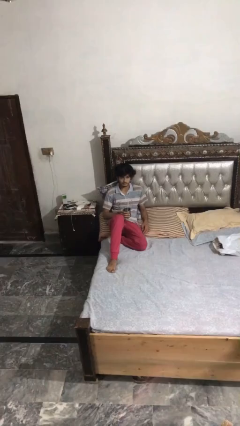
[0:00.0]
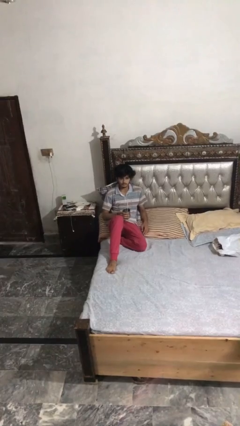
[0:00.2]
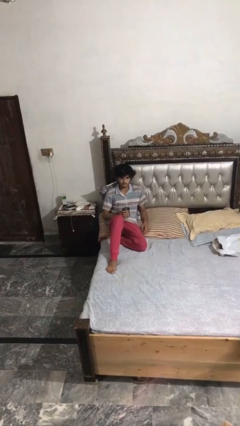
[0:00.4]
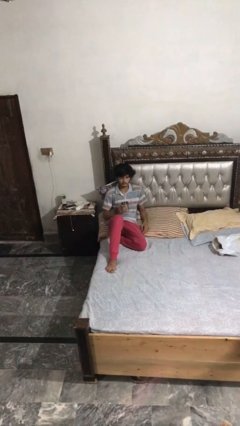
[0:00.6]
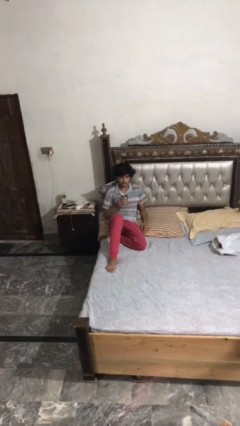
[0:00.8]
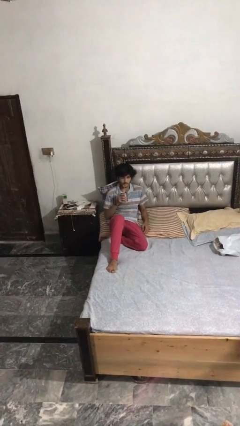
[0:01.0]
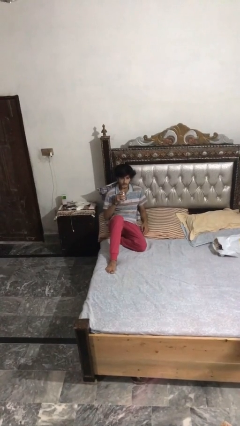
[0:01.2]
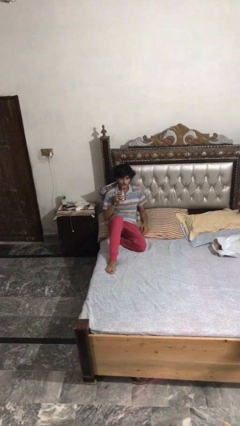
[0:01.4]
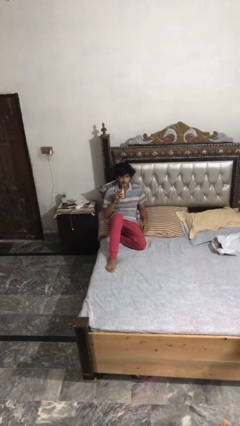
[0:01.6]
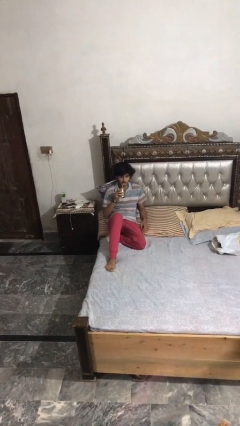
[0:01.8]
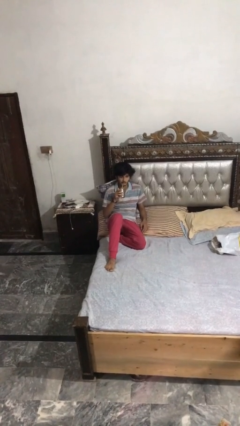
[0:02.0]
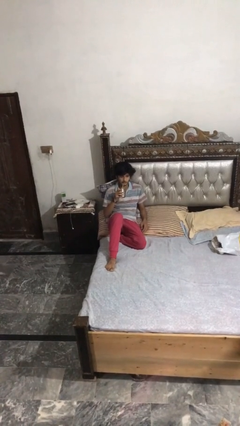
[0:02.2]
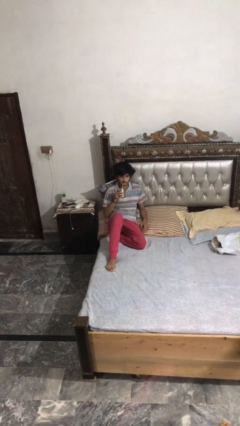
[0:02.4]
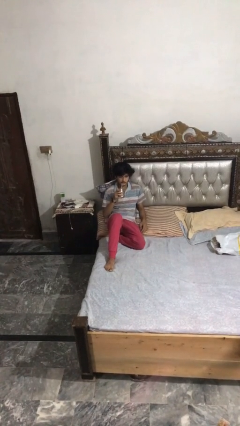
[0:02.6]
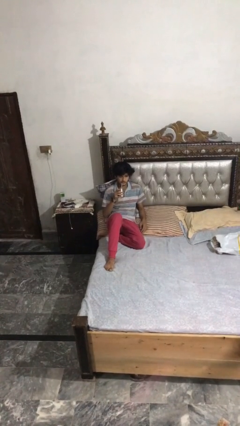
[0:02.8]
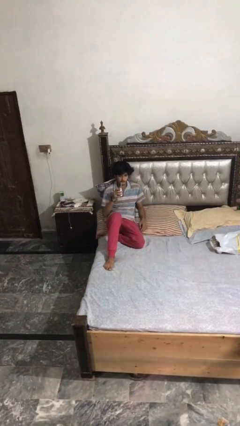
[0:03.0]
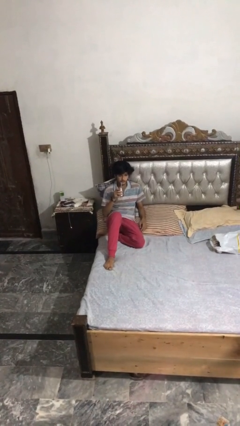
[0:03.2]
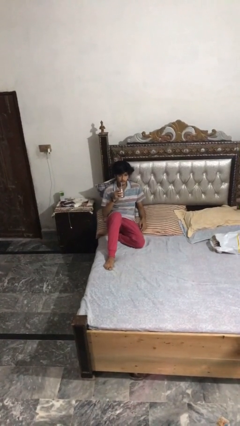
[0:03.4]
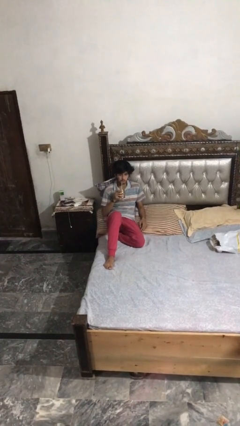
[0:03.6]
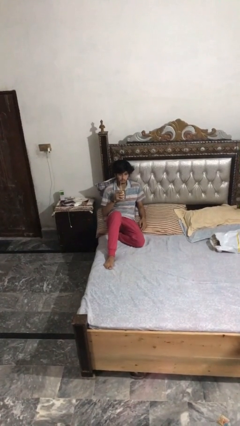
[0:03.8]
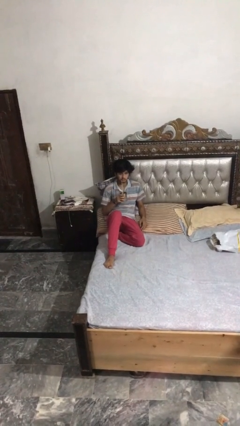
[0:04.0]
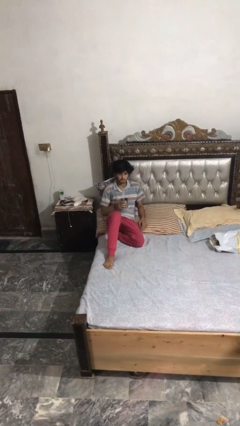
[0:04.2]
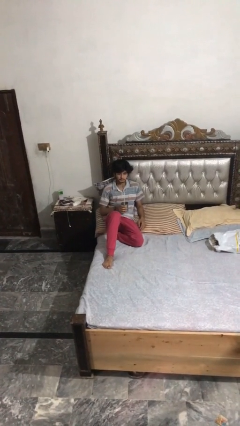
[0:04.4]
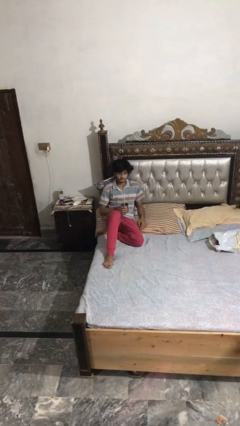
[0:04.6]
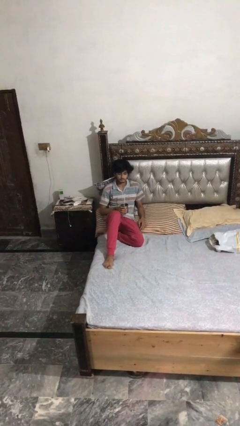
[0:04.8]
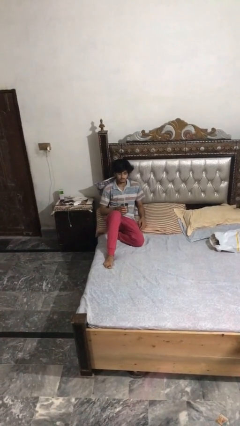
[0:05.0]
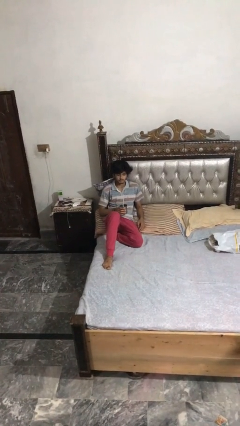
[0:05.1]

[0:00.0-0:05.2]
person drinks from straw

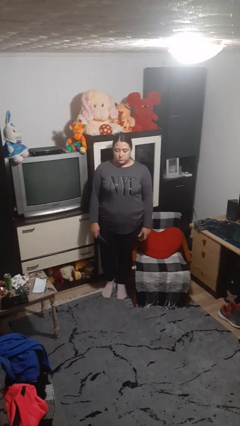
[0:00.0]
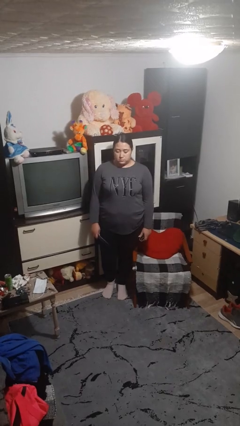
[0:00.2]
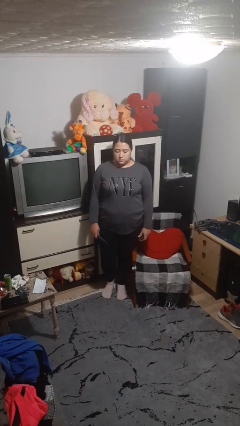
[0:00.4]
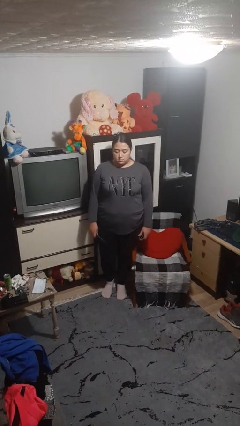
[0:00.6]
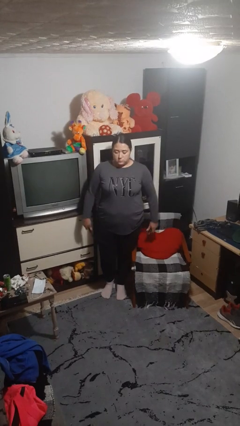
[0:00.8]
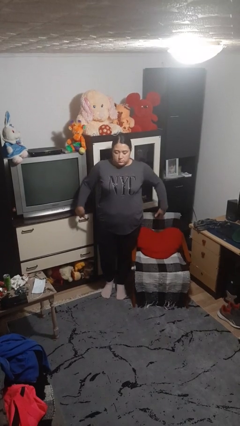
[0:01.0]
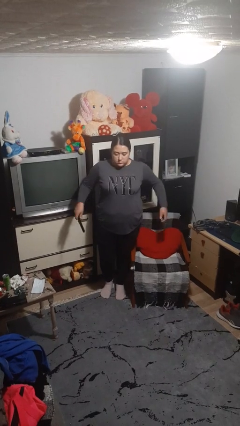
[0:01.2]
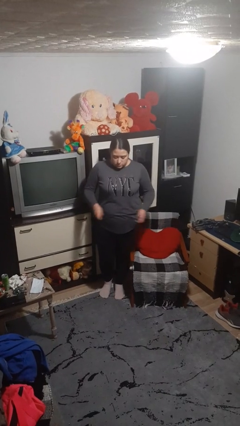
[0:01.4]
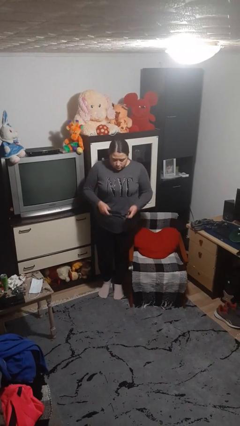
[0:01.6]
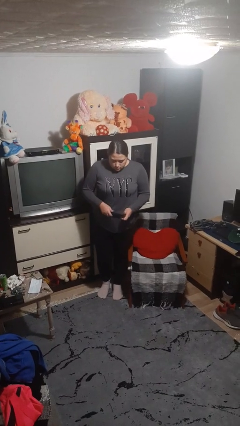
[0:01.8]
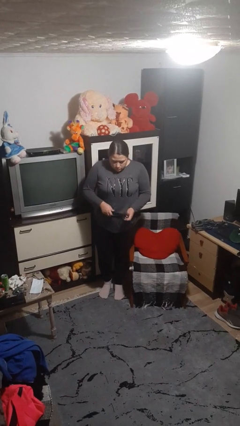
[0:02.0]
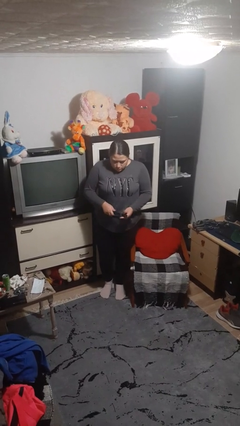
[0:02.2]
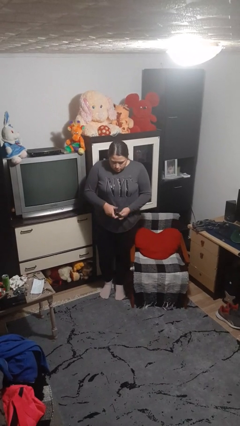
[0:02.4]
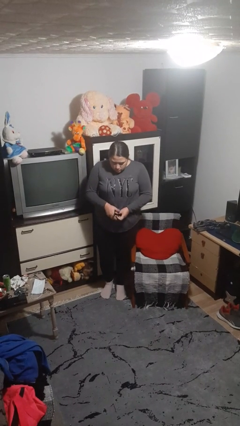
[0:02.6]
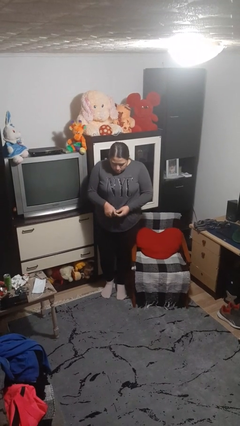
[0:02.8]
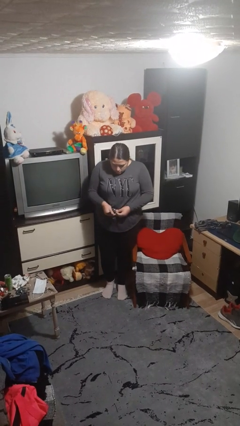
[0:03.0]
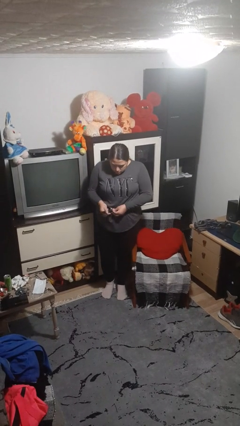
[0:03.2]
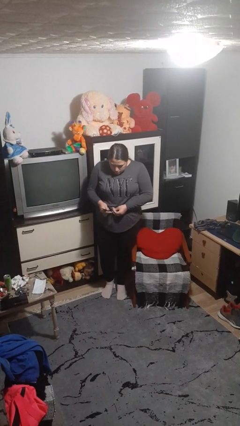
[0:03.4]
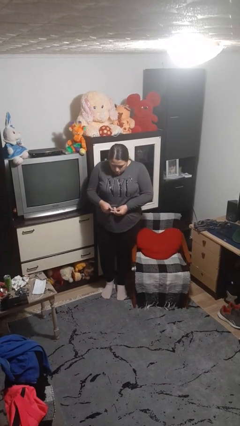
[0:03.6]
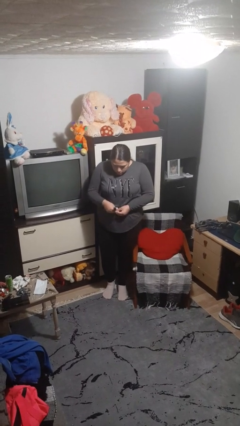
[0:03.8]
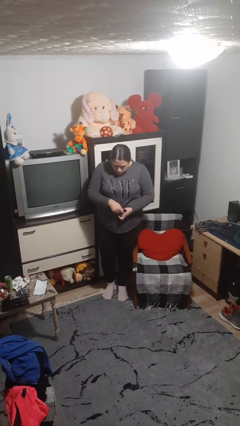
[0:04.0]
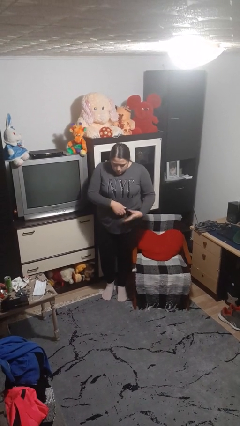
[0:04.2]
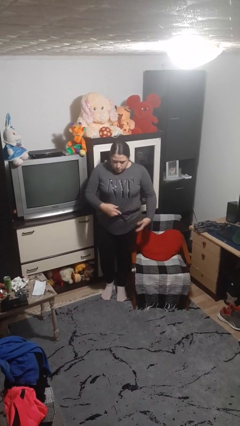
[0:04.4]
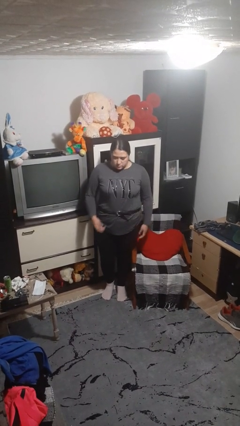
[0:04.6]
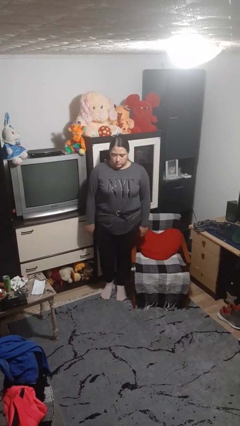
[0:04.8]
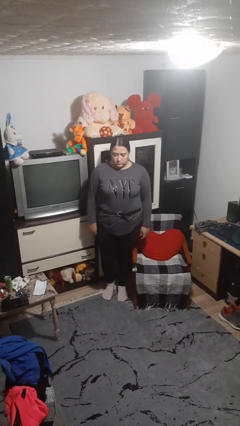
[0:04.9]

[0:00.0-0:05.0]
person puts on belt

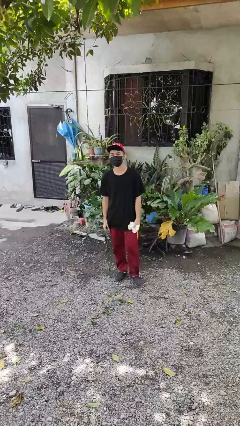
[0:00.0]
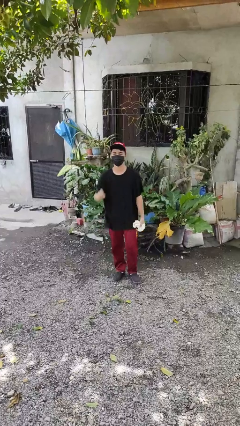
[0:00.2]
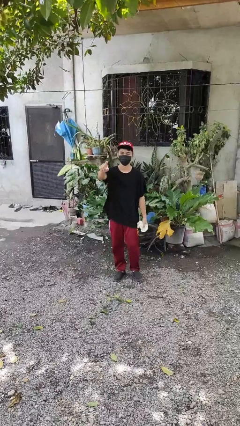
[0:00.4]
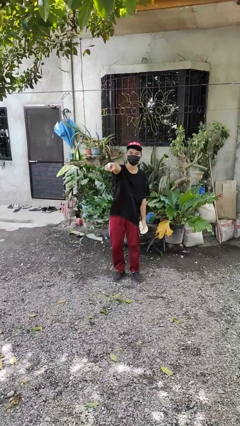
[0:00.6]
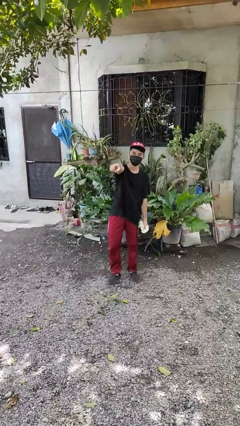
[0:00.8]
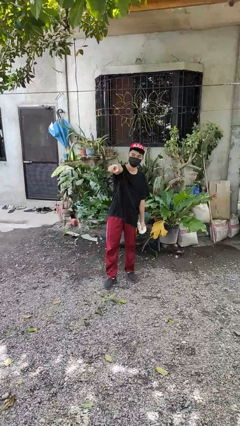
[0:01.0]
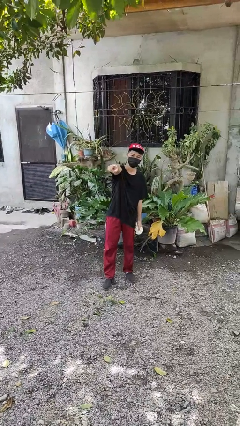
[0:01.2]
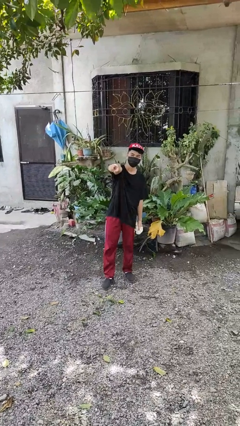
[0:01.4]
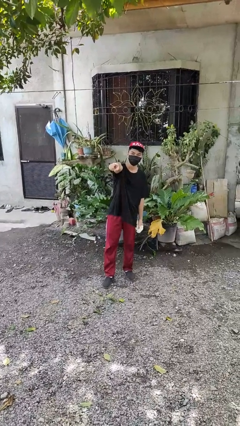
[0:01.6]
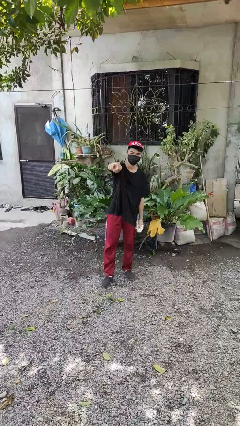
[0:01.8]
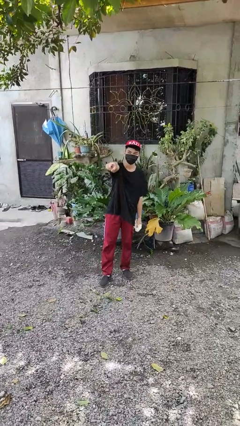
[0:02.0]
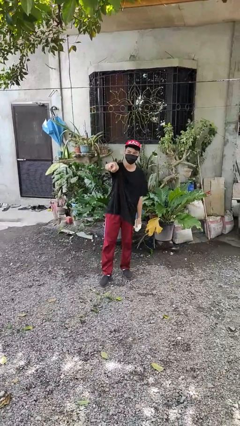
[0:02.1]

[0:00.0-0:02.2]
person points at person

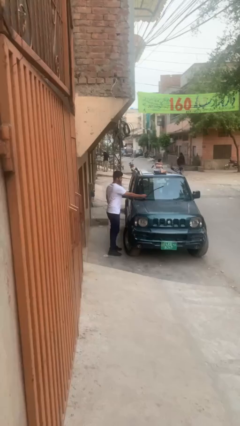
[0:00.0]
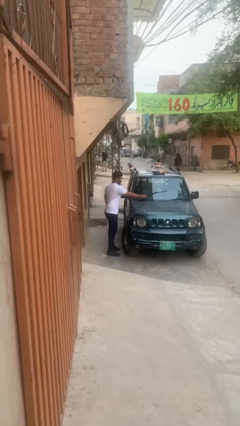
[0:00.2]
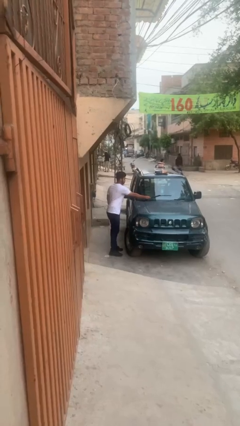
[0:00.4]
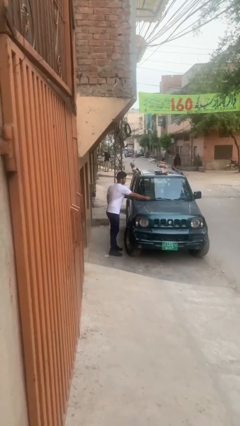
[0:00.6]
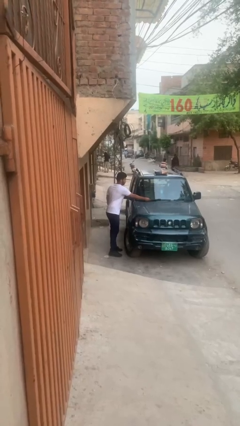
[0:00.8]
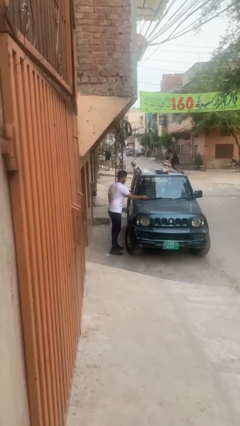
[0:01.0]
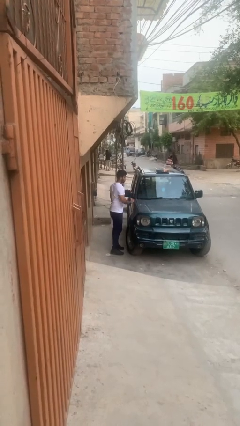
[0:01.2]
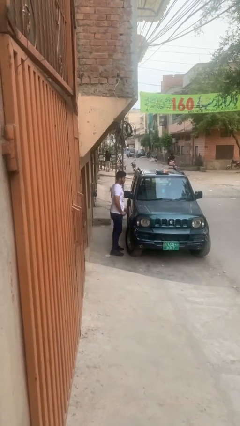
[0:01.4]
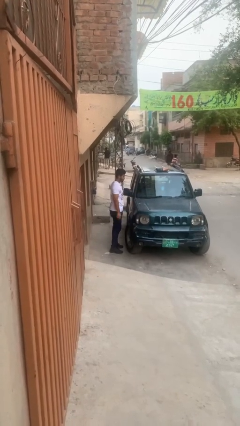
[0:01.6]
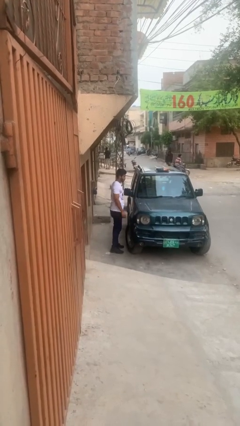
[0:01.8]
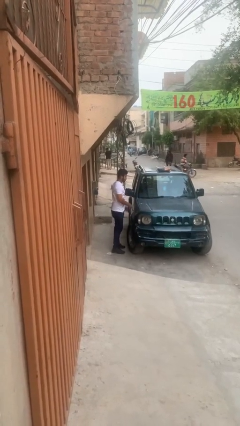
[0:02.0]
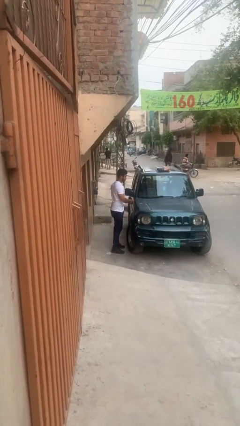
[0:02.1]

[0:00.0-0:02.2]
person flips down car wipers

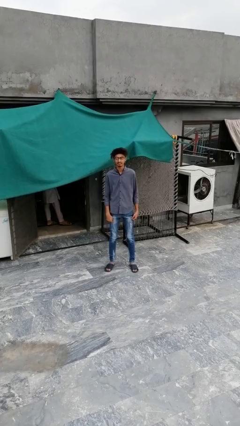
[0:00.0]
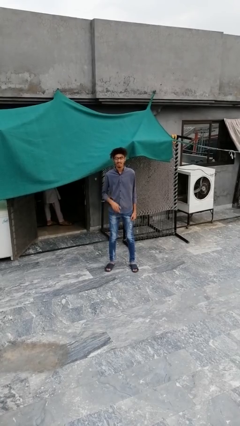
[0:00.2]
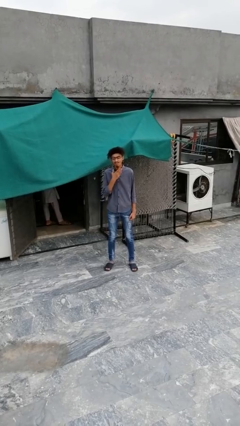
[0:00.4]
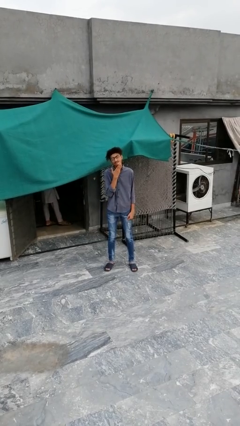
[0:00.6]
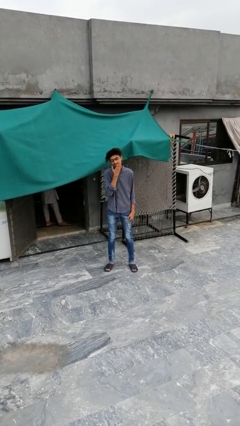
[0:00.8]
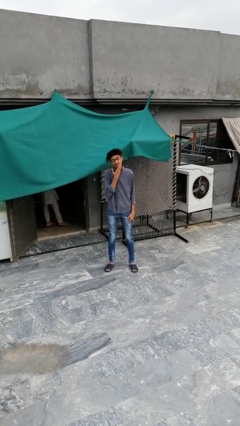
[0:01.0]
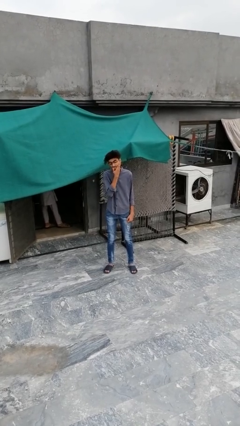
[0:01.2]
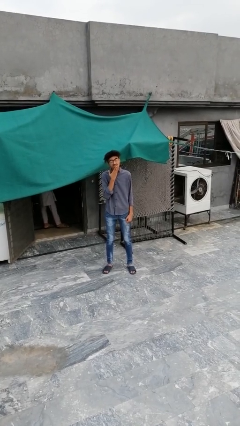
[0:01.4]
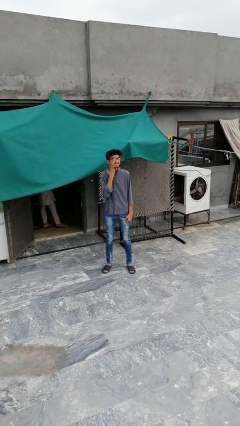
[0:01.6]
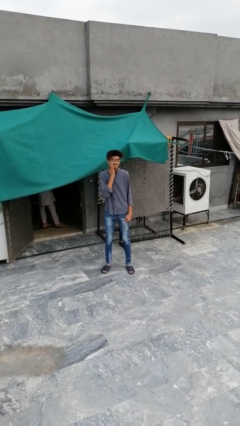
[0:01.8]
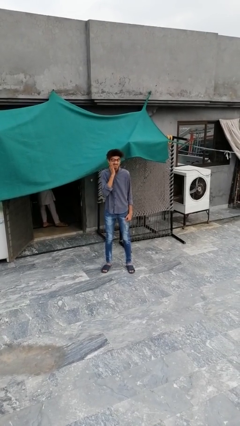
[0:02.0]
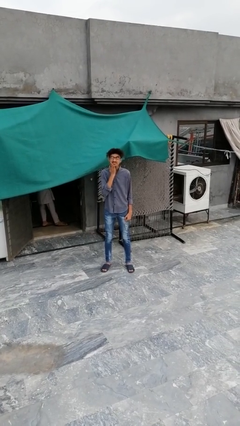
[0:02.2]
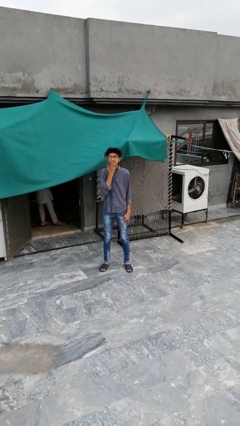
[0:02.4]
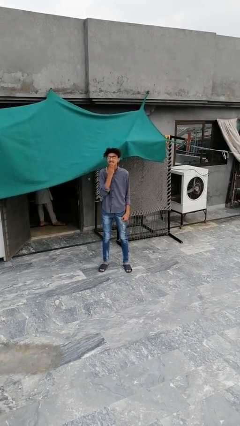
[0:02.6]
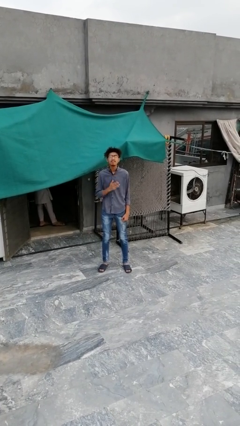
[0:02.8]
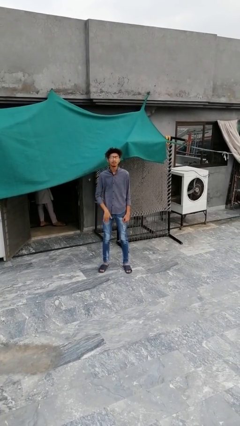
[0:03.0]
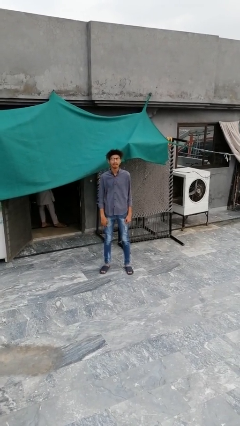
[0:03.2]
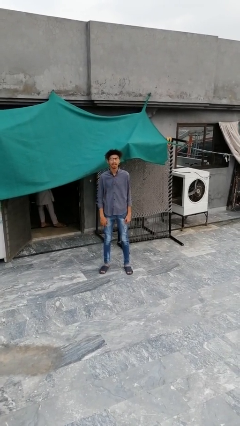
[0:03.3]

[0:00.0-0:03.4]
person strokes chin
